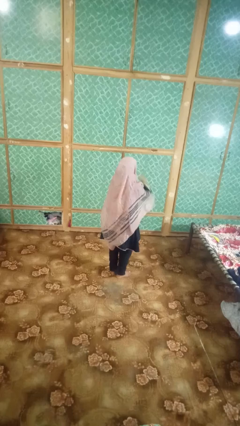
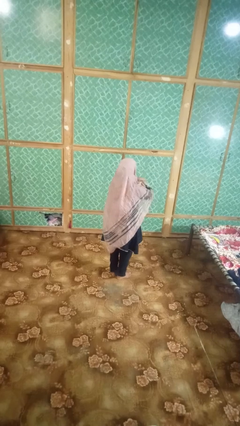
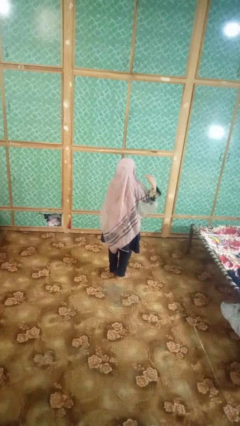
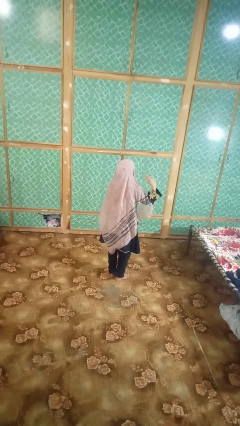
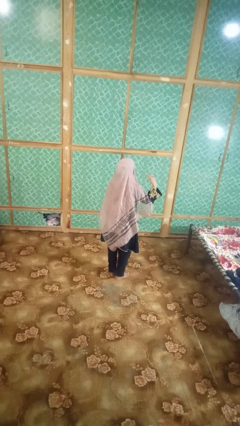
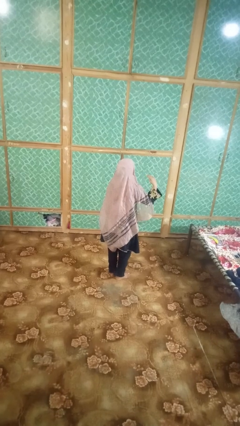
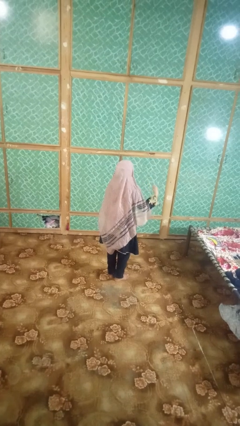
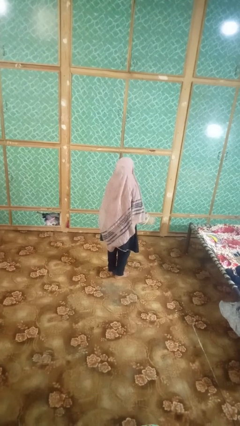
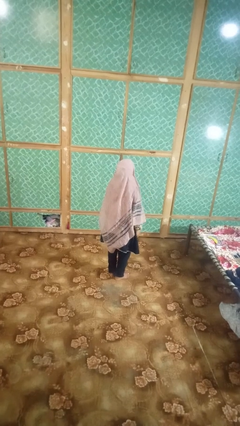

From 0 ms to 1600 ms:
person gestures cut

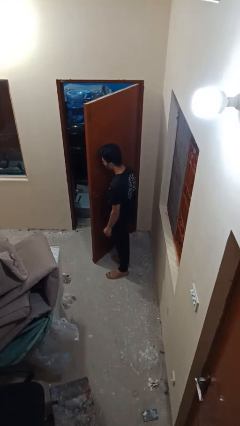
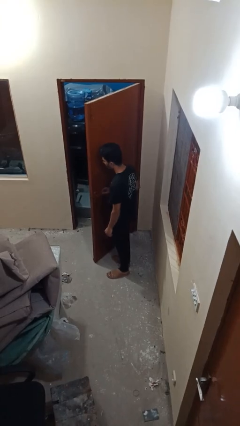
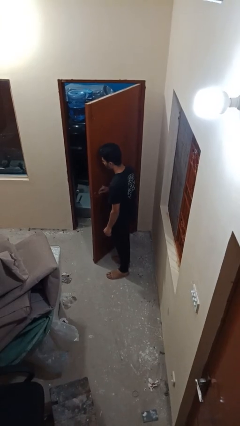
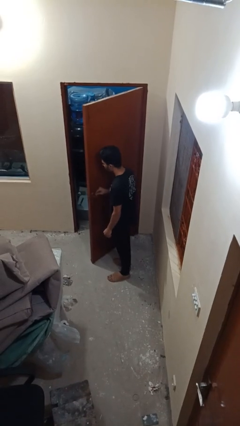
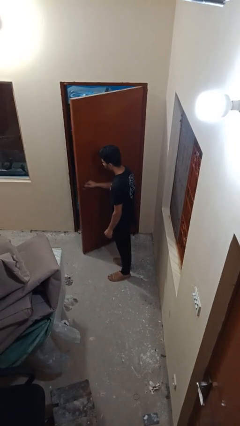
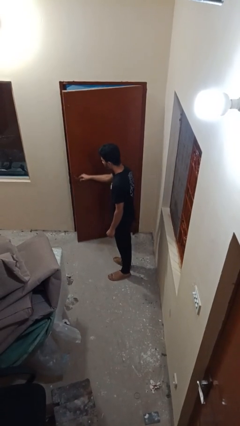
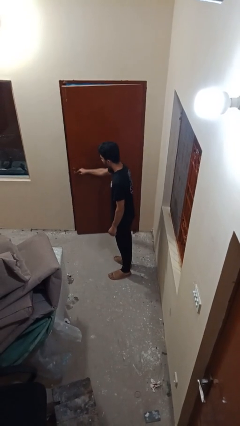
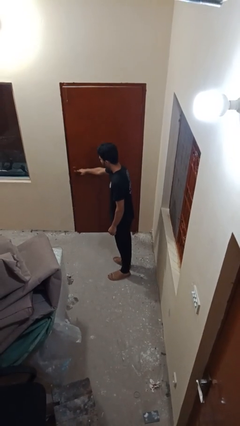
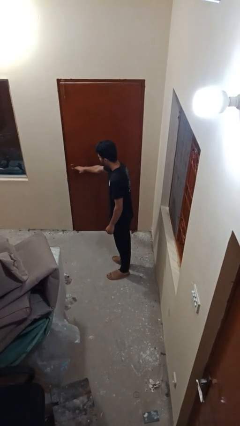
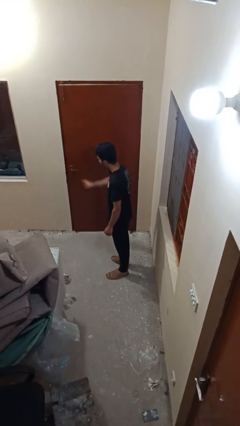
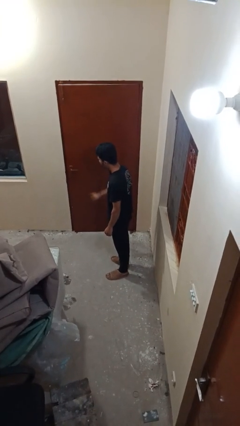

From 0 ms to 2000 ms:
person closes facility door

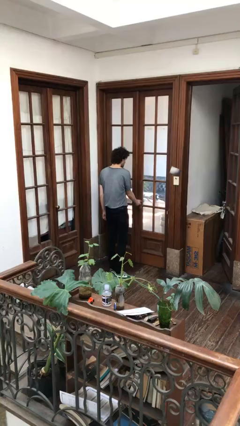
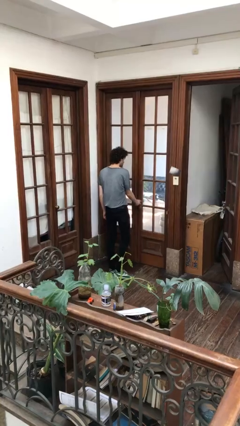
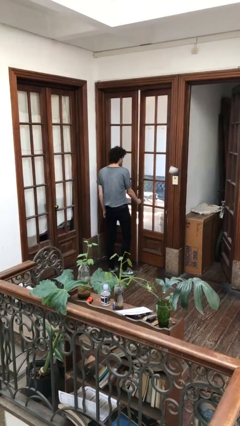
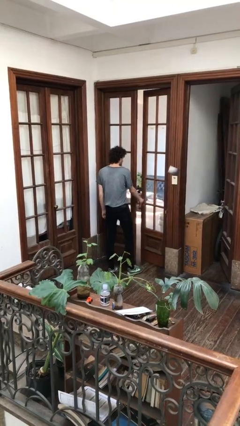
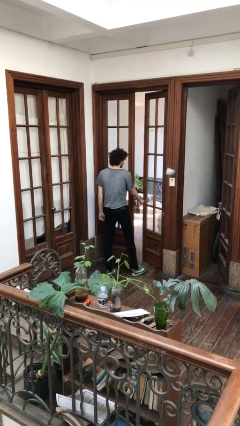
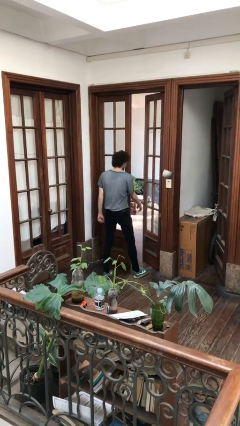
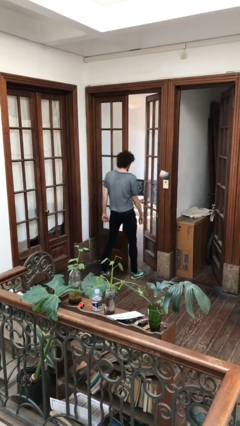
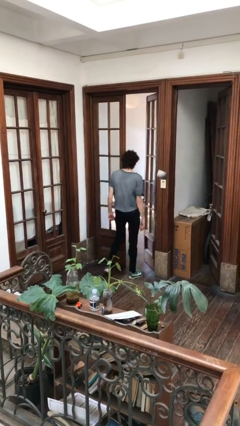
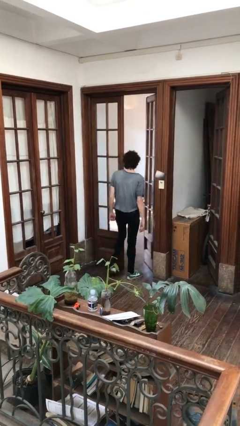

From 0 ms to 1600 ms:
person opens facility door

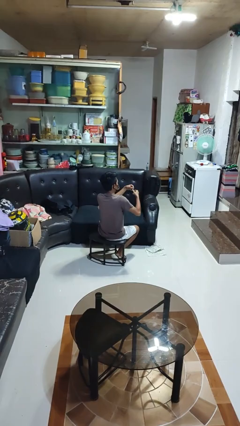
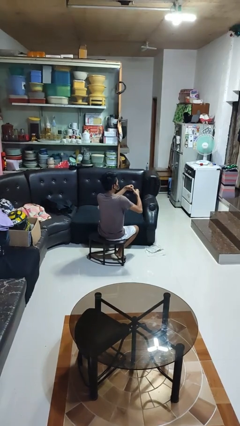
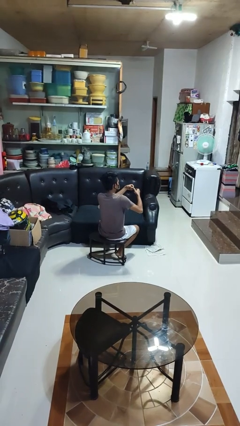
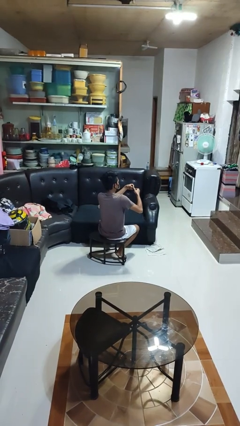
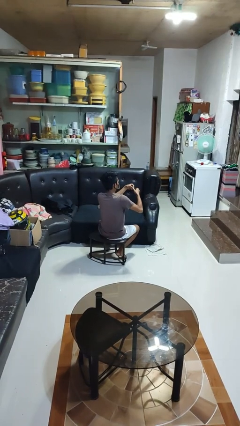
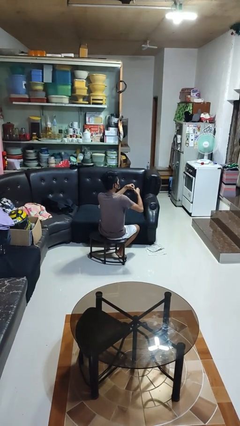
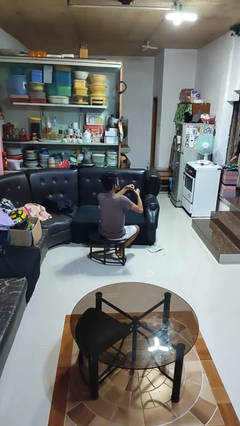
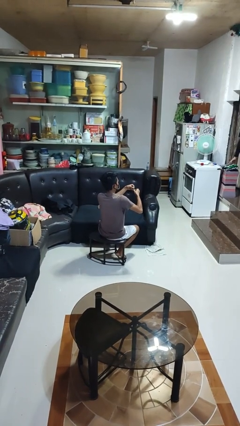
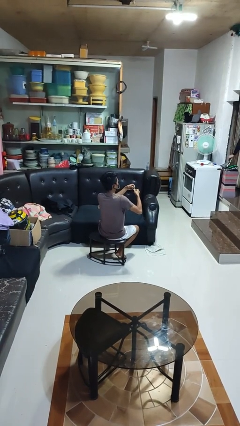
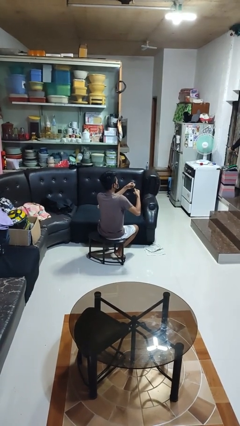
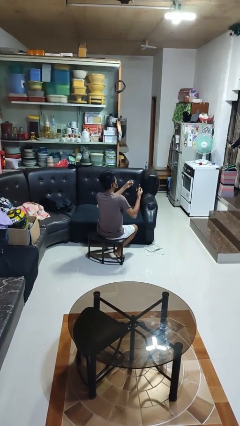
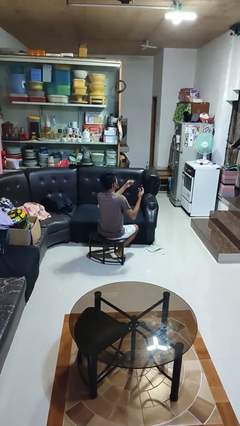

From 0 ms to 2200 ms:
person clips fingernails

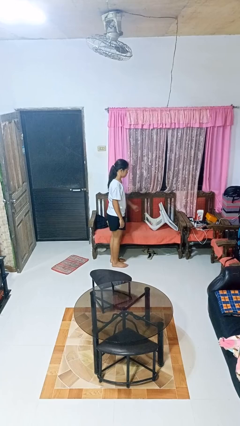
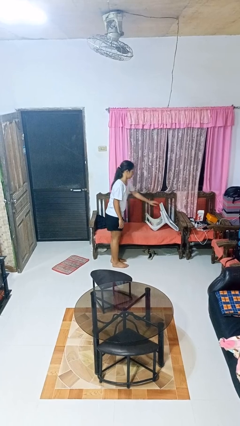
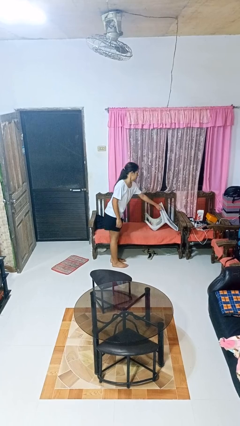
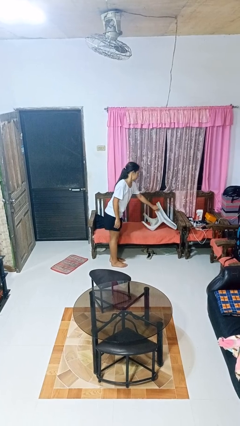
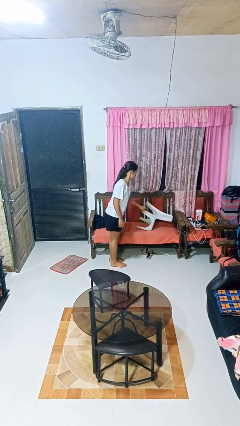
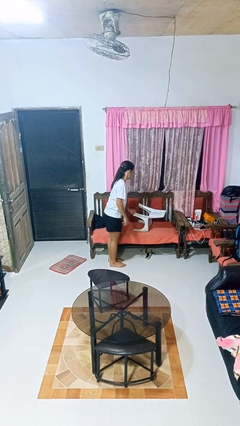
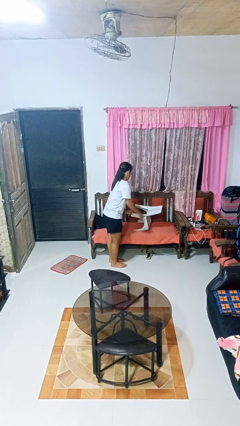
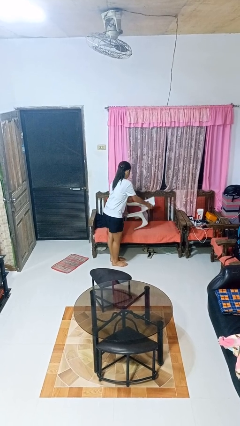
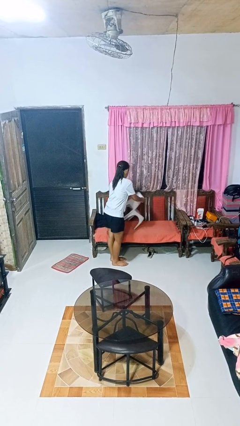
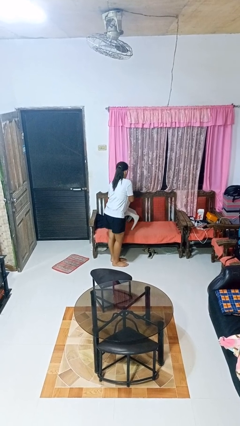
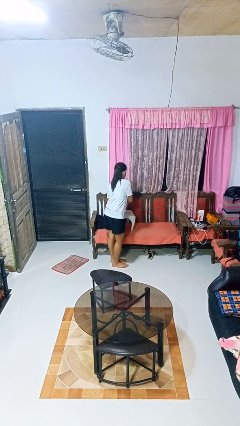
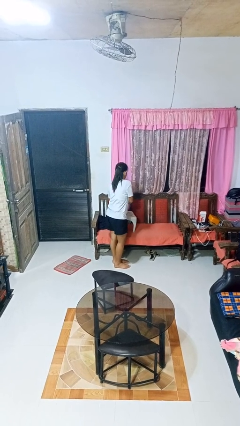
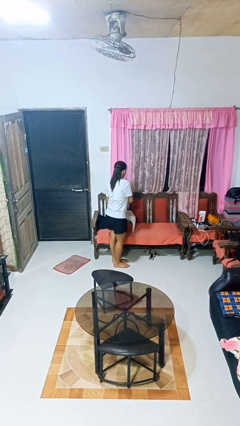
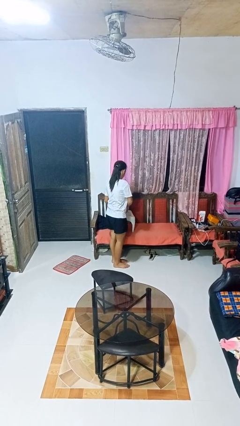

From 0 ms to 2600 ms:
person sets upright furniture

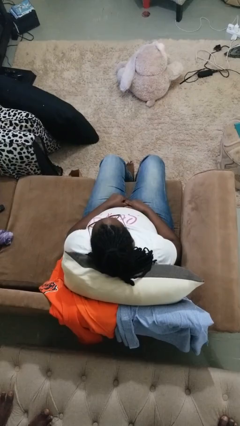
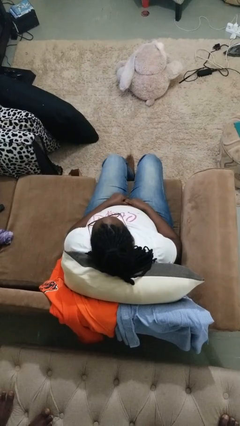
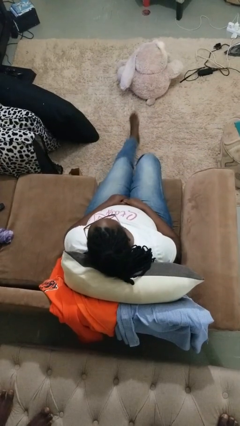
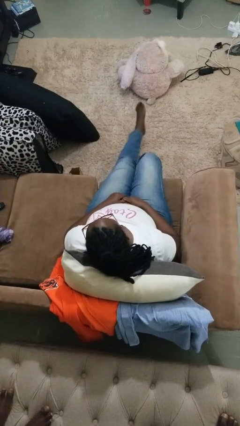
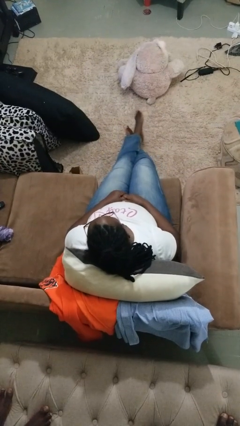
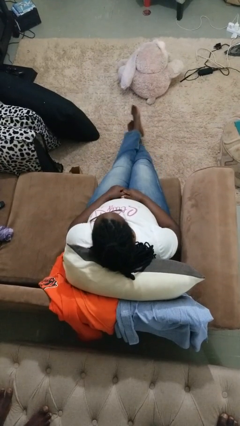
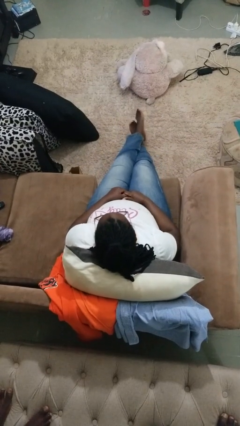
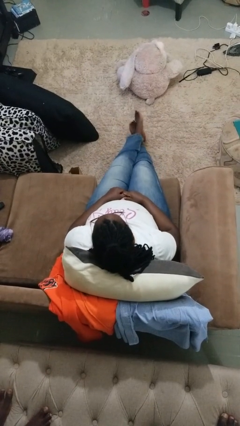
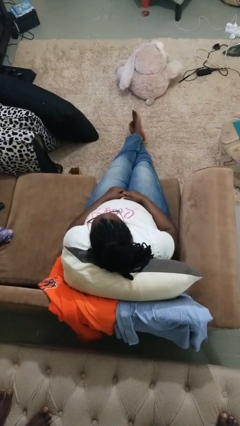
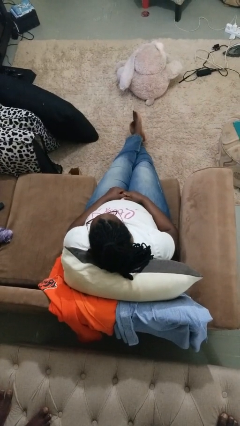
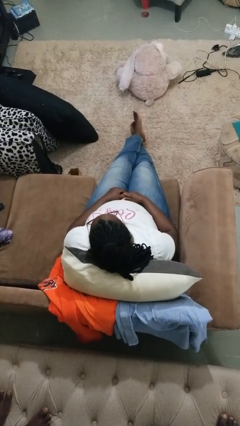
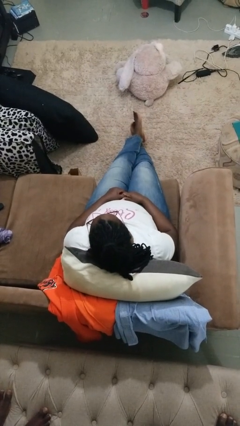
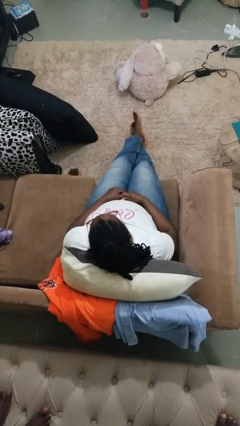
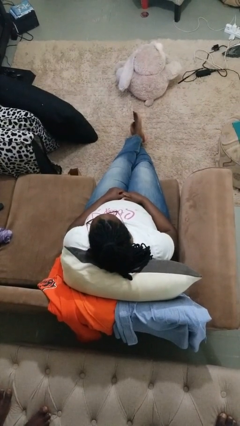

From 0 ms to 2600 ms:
person crosses legs

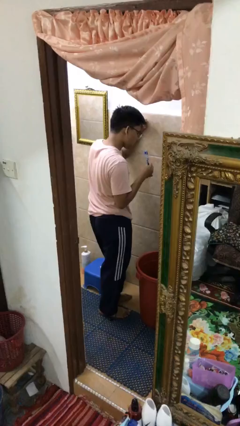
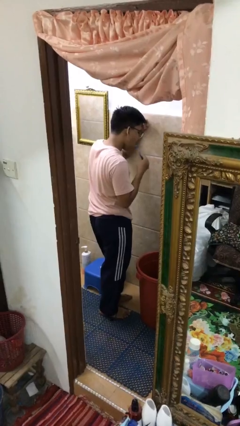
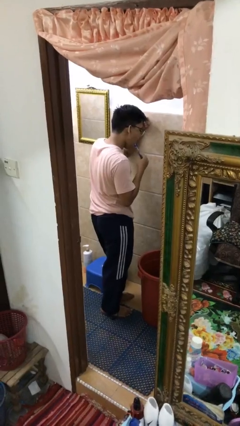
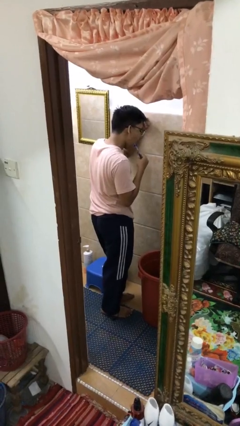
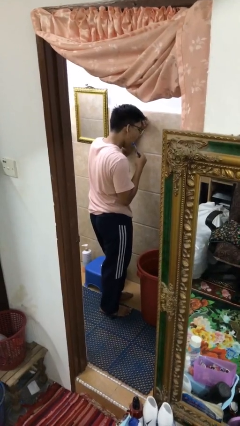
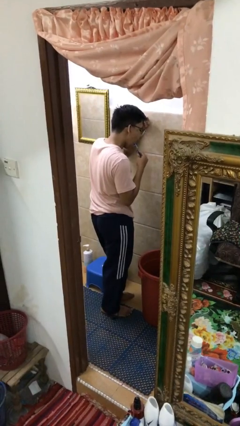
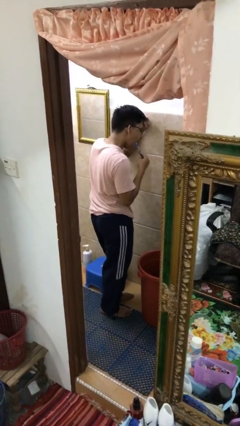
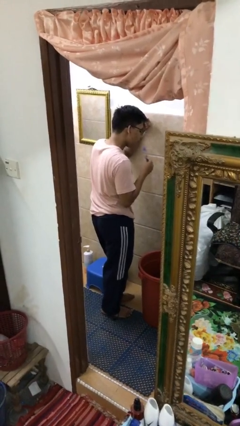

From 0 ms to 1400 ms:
person brushes teeth

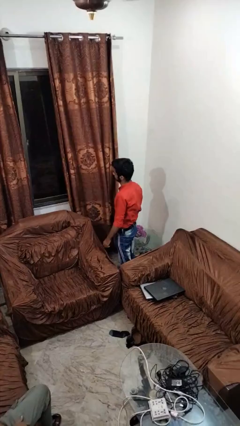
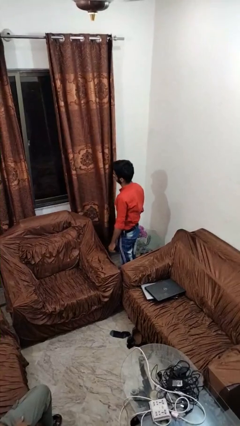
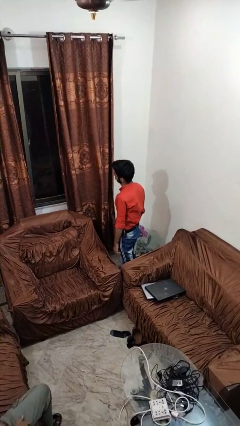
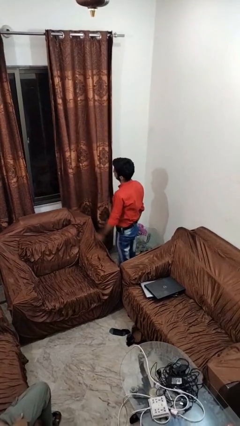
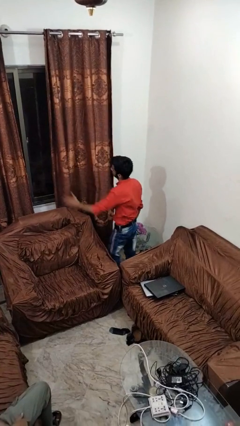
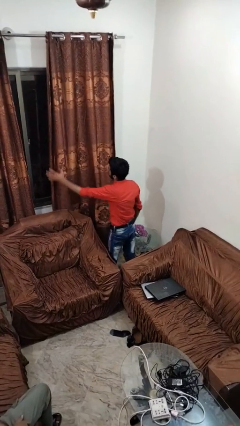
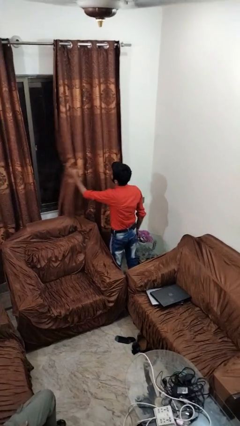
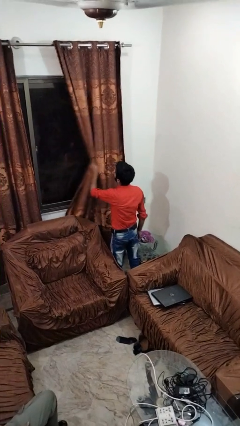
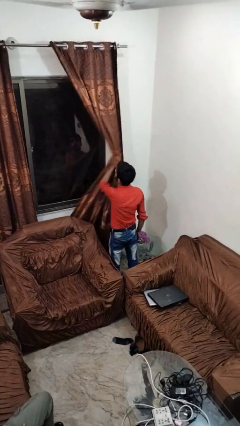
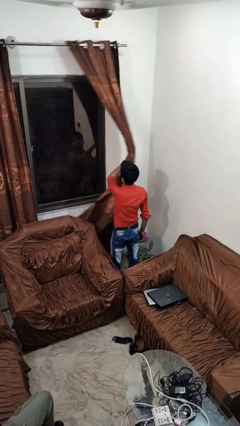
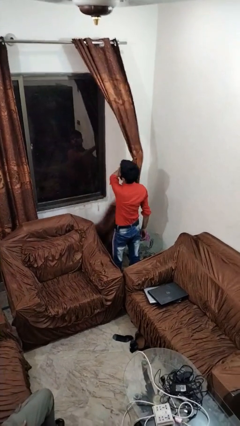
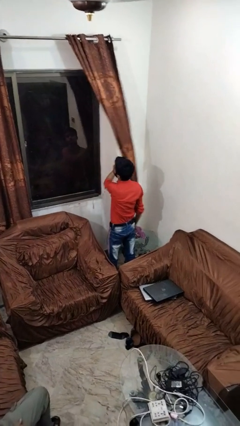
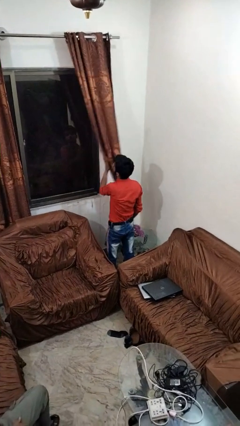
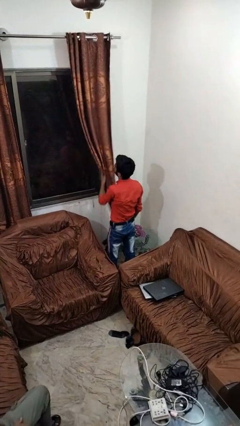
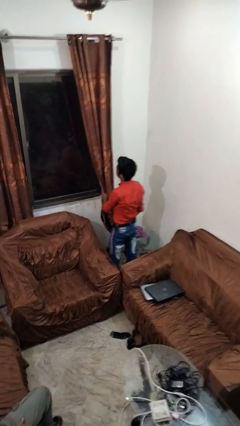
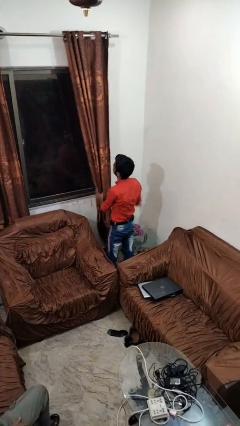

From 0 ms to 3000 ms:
person opens curtains
